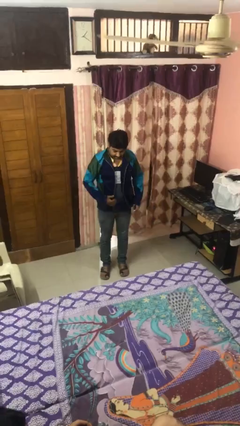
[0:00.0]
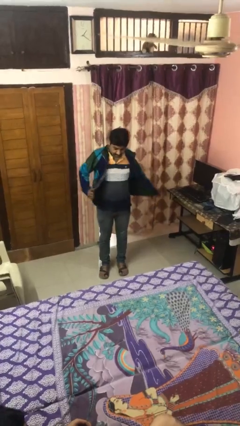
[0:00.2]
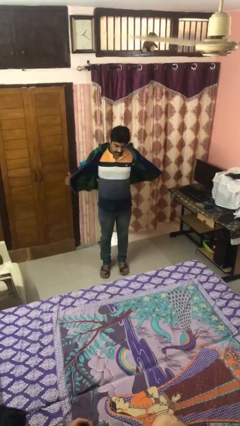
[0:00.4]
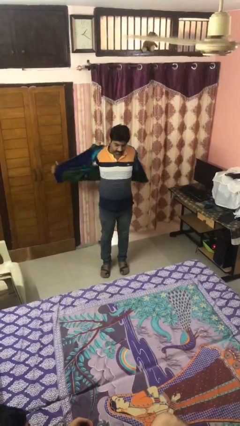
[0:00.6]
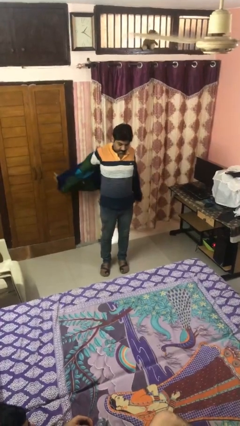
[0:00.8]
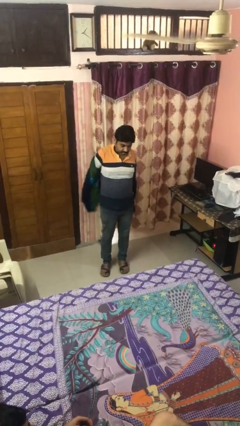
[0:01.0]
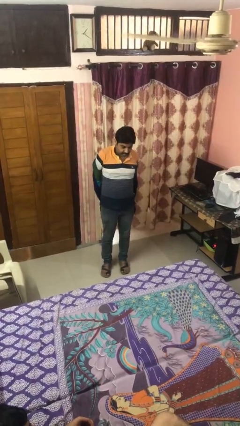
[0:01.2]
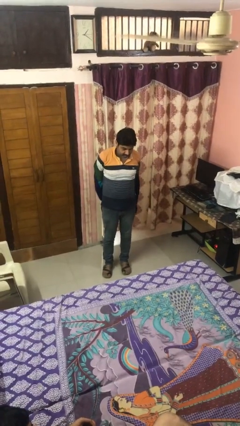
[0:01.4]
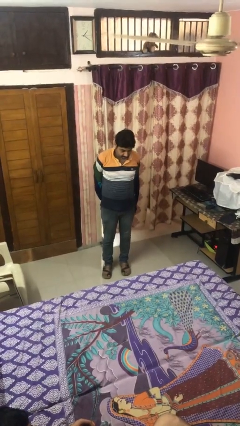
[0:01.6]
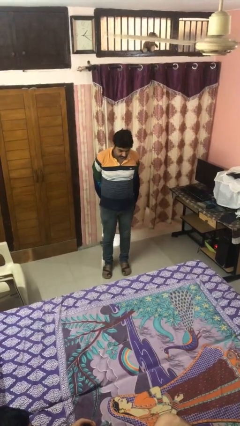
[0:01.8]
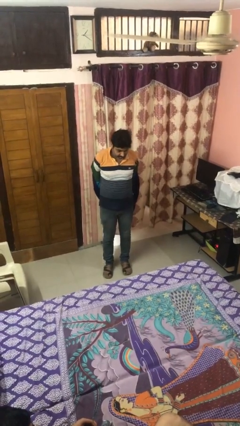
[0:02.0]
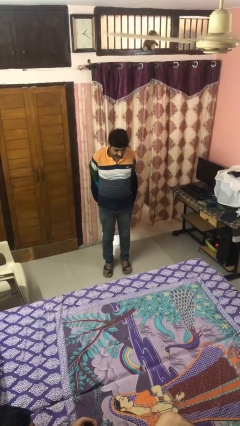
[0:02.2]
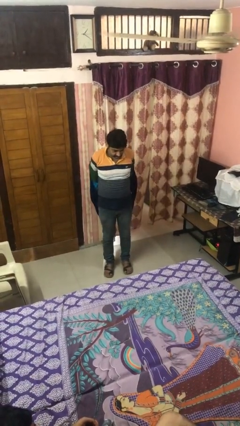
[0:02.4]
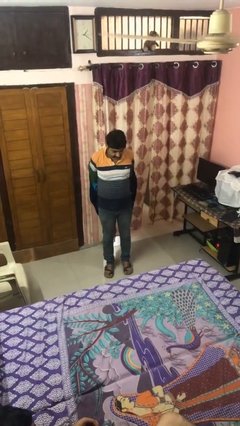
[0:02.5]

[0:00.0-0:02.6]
person takes off jacket

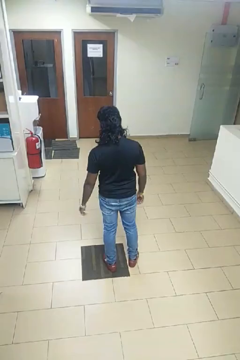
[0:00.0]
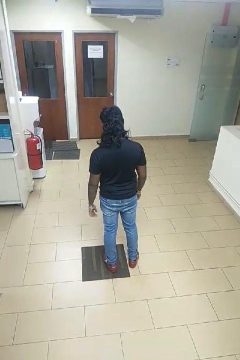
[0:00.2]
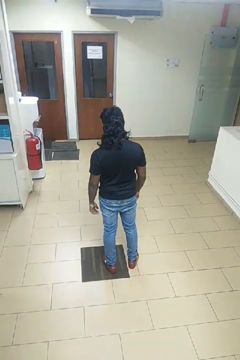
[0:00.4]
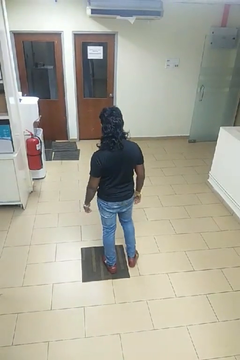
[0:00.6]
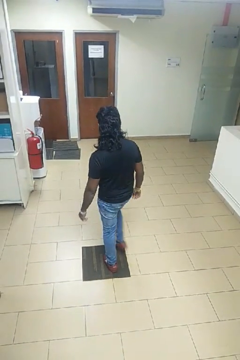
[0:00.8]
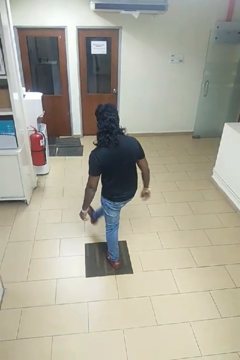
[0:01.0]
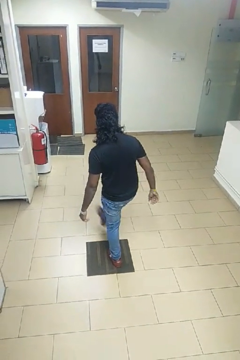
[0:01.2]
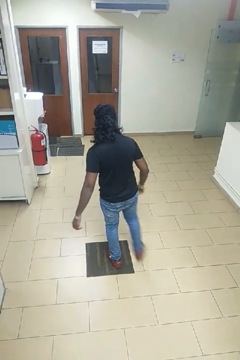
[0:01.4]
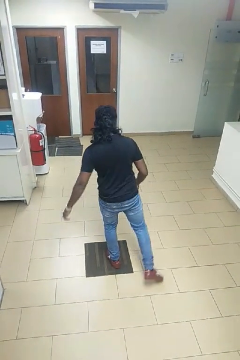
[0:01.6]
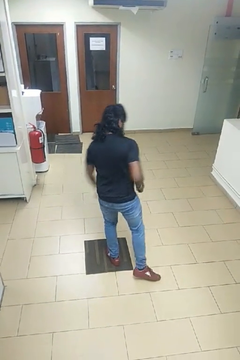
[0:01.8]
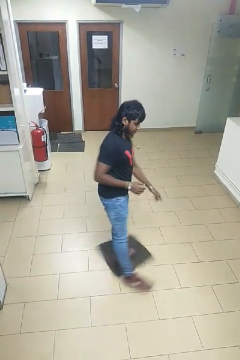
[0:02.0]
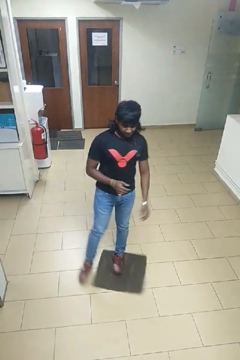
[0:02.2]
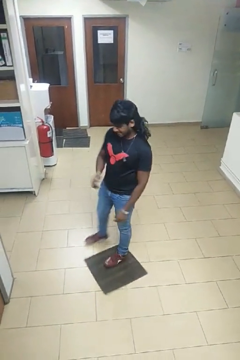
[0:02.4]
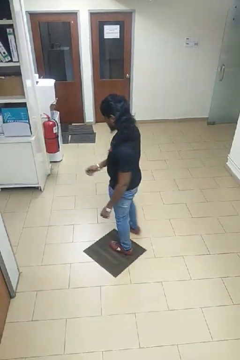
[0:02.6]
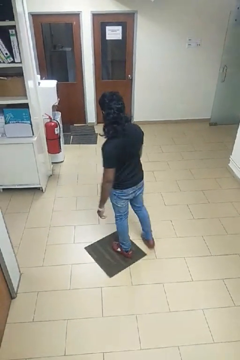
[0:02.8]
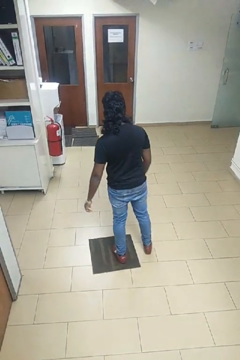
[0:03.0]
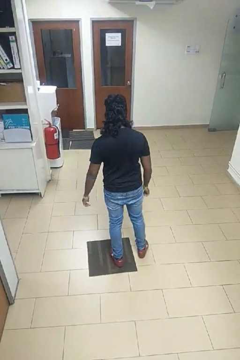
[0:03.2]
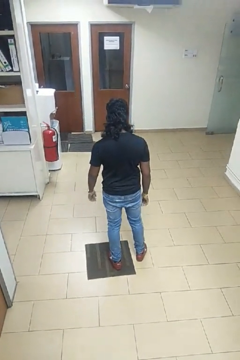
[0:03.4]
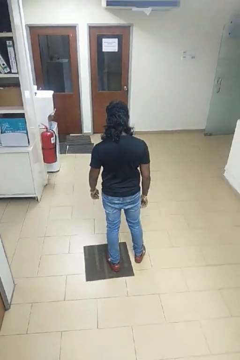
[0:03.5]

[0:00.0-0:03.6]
person twirls

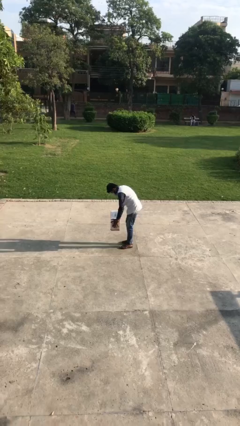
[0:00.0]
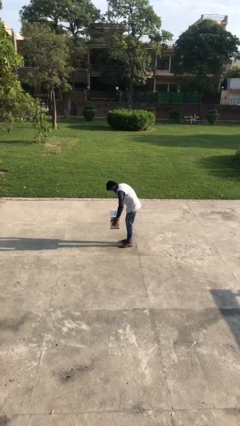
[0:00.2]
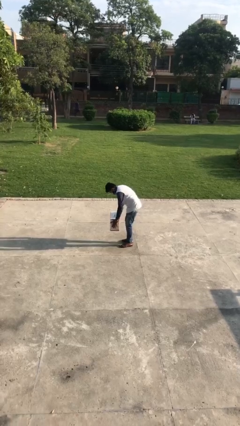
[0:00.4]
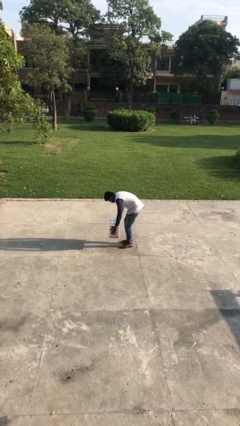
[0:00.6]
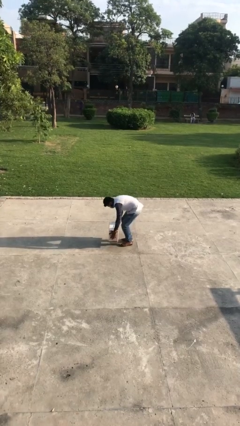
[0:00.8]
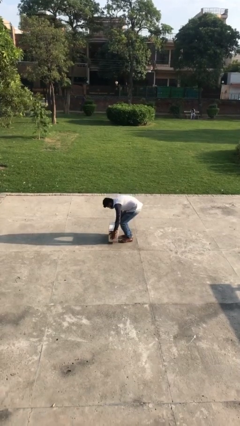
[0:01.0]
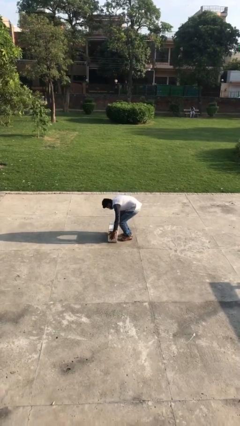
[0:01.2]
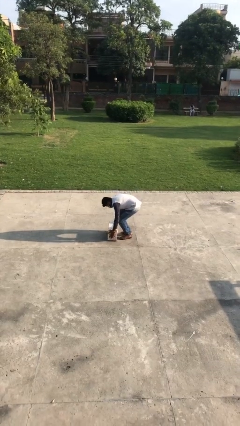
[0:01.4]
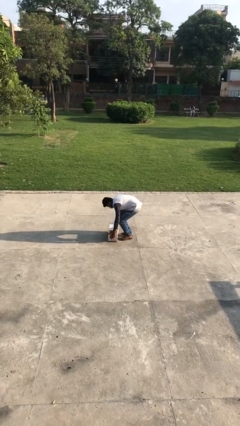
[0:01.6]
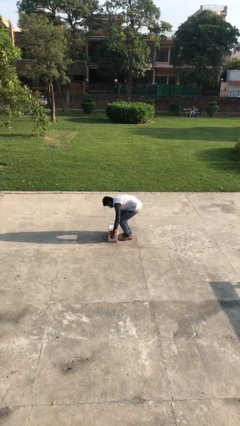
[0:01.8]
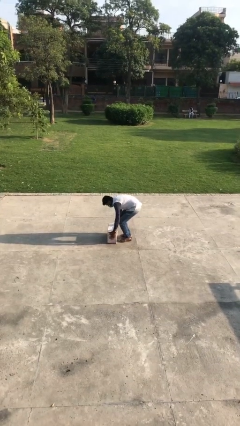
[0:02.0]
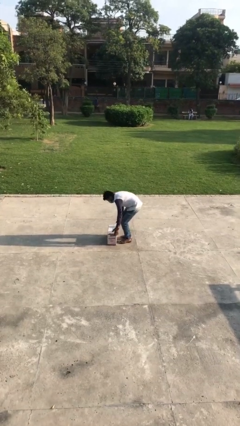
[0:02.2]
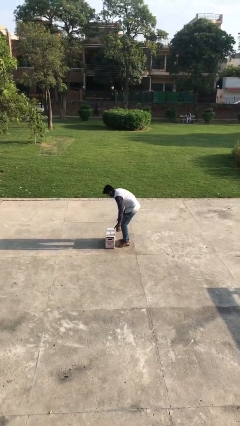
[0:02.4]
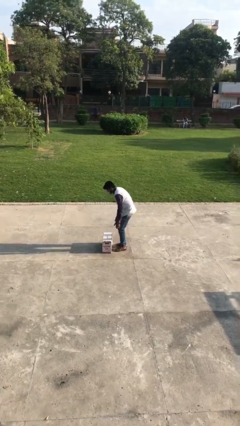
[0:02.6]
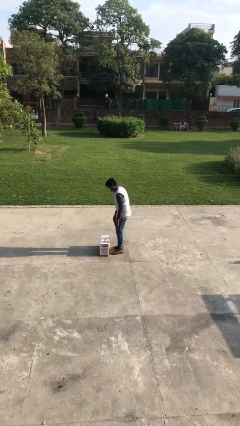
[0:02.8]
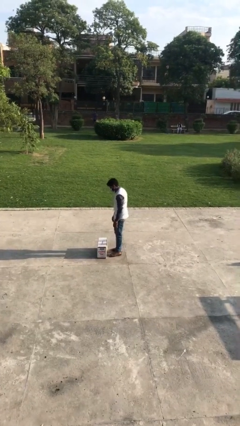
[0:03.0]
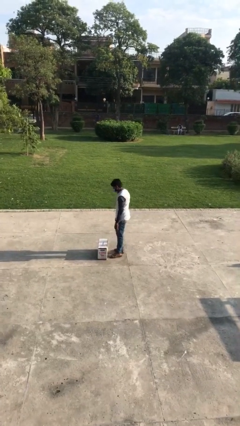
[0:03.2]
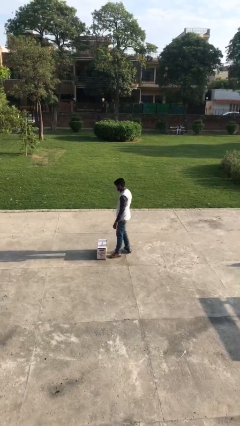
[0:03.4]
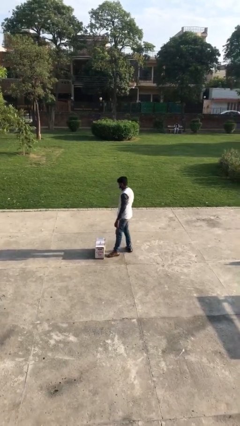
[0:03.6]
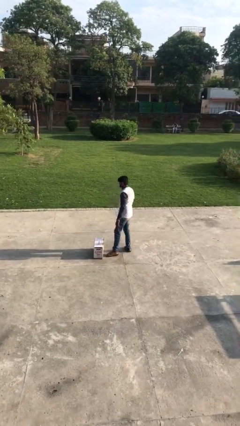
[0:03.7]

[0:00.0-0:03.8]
person puts down object on floor

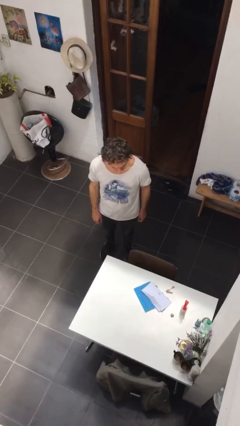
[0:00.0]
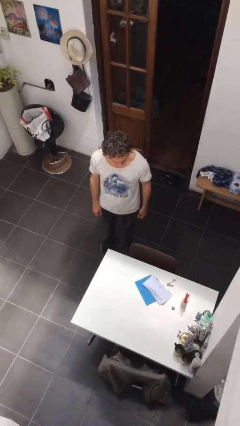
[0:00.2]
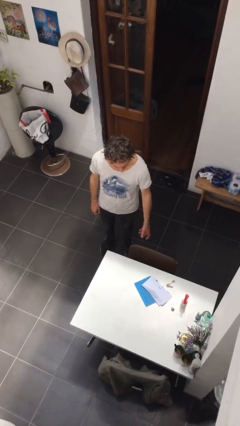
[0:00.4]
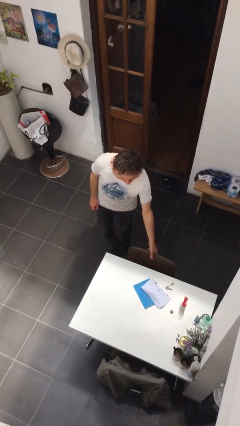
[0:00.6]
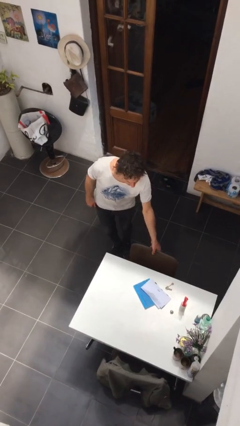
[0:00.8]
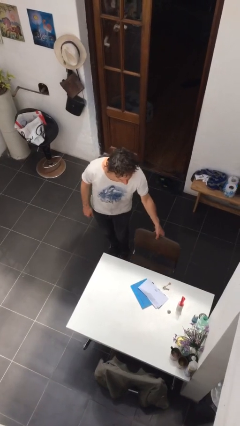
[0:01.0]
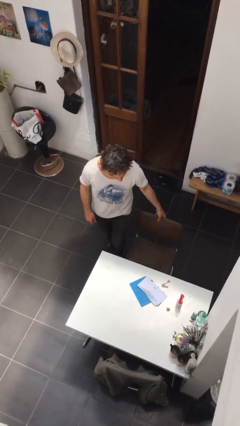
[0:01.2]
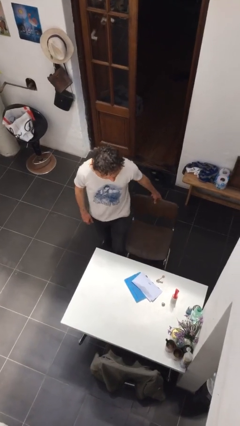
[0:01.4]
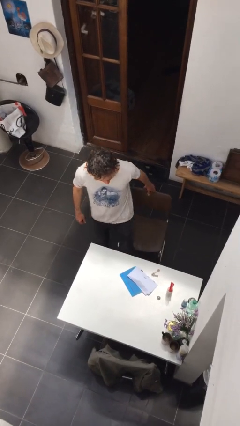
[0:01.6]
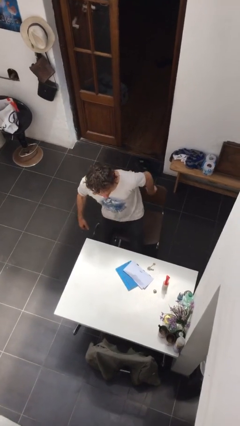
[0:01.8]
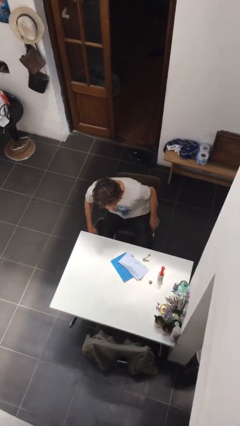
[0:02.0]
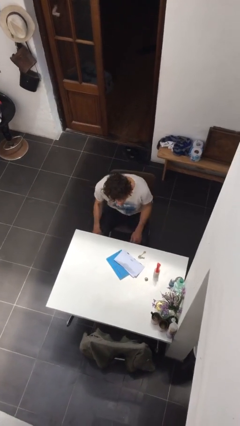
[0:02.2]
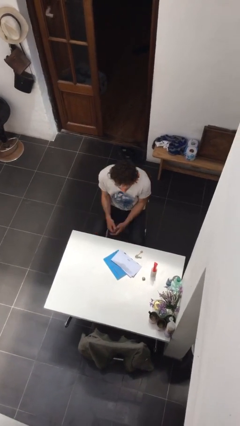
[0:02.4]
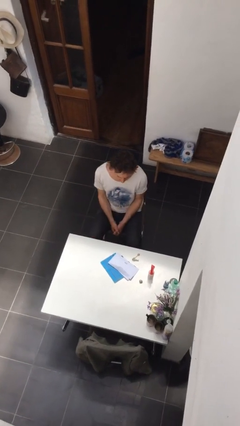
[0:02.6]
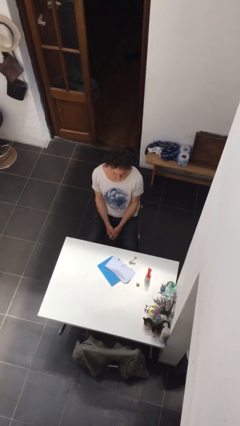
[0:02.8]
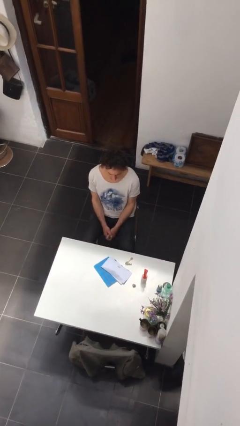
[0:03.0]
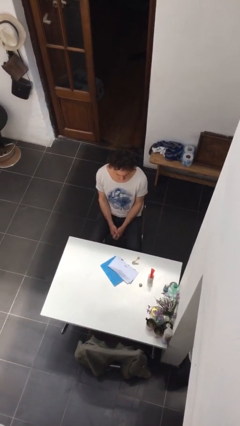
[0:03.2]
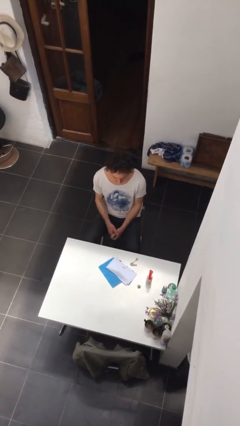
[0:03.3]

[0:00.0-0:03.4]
person sits down

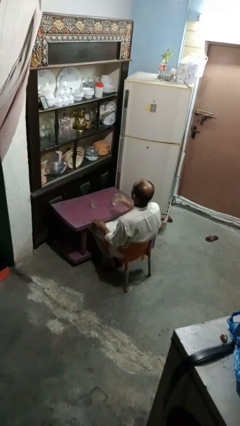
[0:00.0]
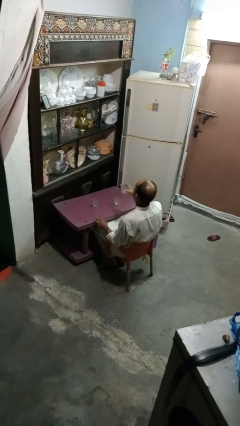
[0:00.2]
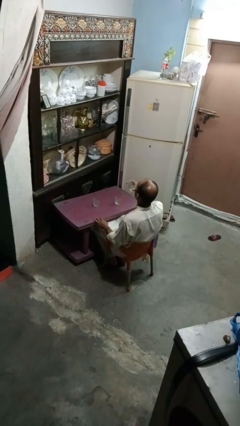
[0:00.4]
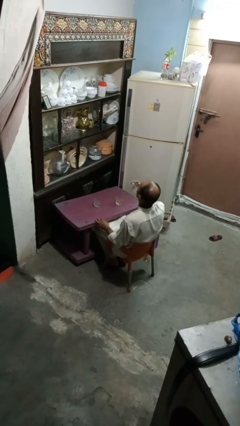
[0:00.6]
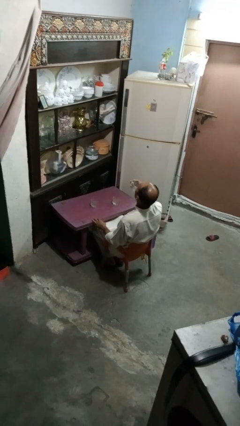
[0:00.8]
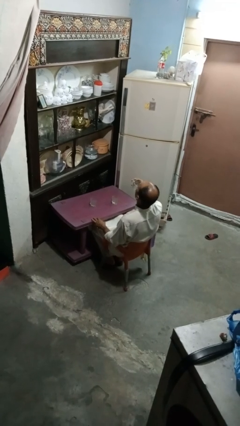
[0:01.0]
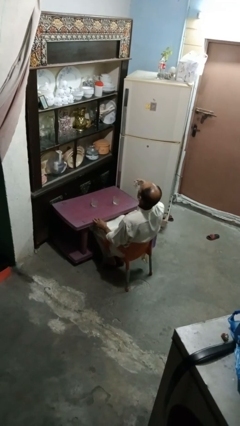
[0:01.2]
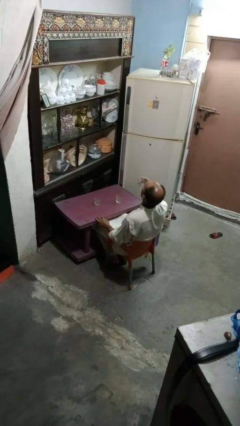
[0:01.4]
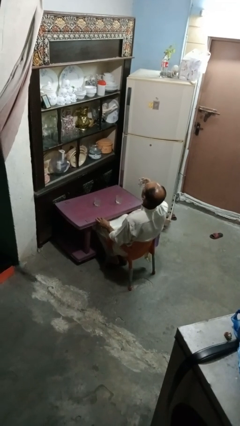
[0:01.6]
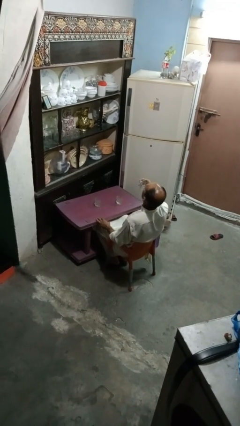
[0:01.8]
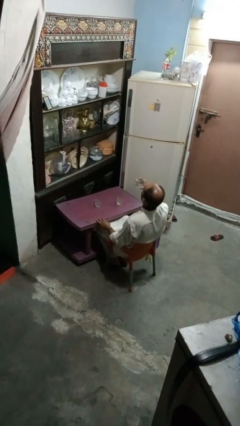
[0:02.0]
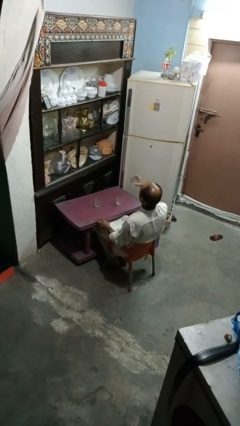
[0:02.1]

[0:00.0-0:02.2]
person drinks from shotglass

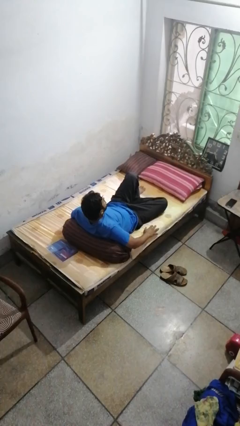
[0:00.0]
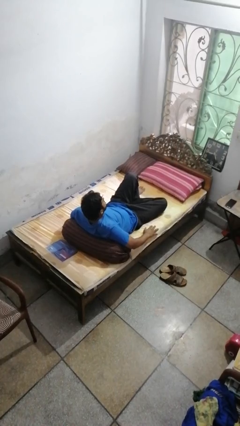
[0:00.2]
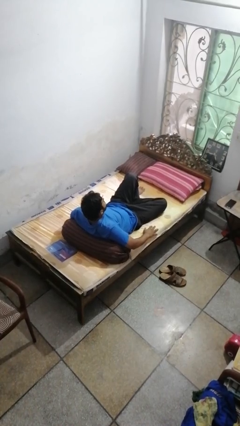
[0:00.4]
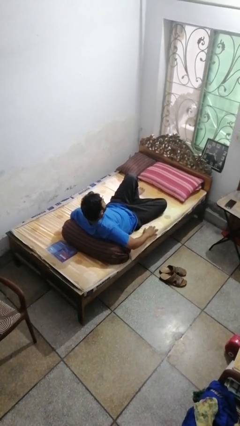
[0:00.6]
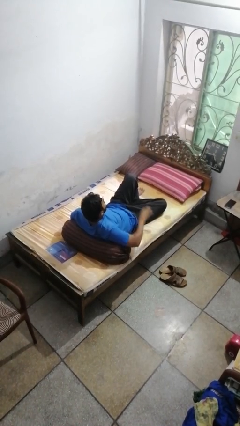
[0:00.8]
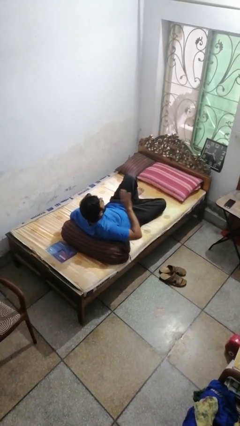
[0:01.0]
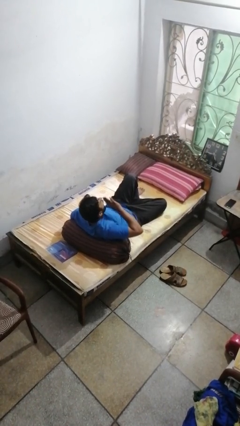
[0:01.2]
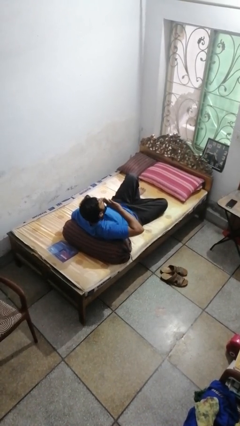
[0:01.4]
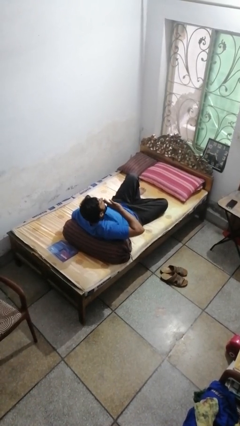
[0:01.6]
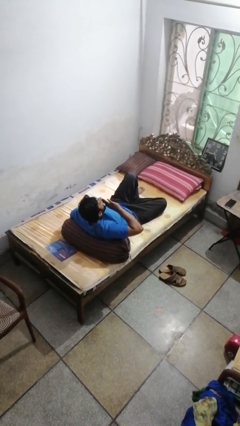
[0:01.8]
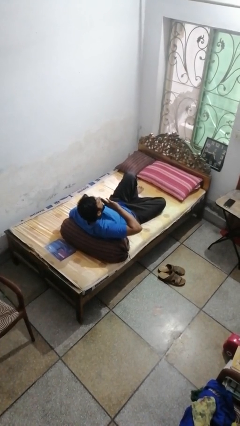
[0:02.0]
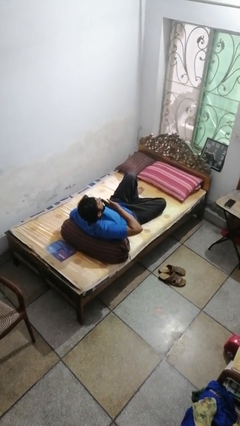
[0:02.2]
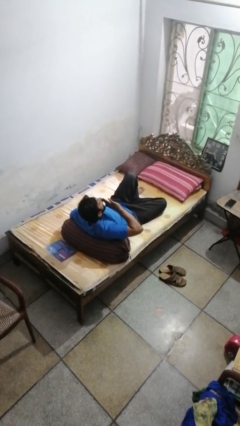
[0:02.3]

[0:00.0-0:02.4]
person yawns

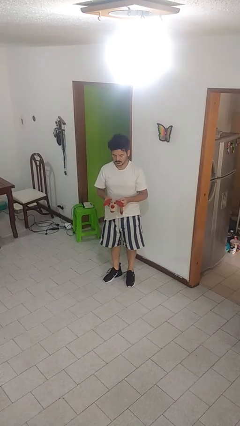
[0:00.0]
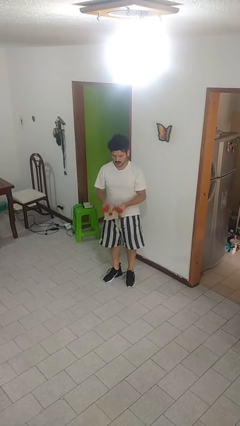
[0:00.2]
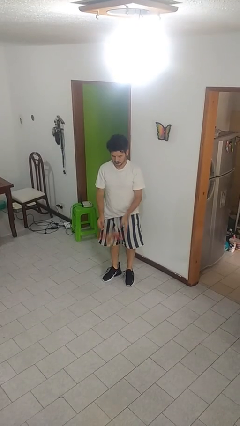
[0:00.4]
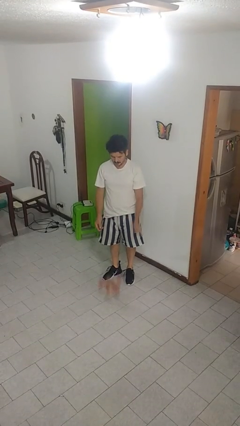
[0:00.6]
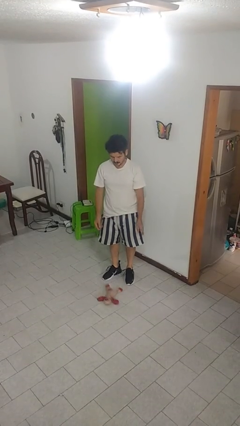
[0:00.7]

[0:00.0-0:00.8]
person throws object to ground
